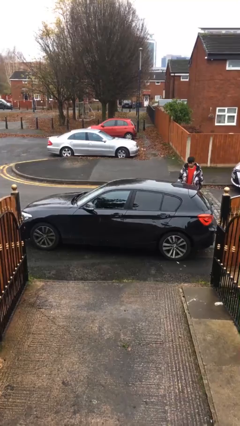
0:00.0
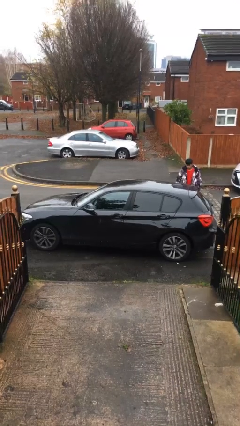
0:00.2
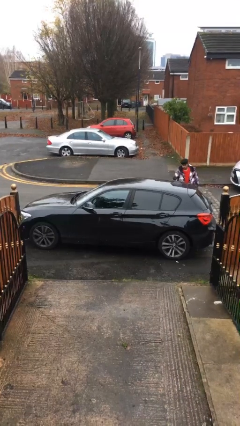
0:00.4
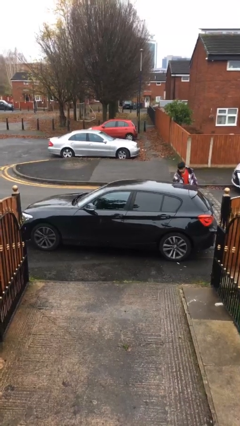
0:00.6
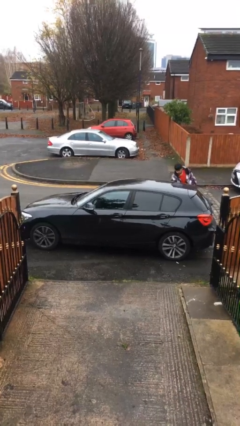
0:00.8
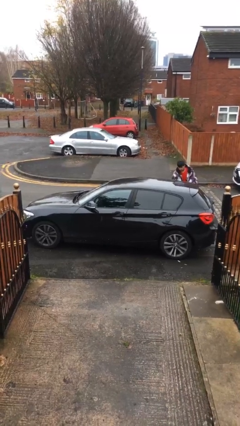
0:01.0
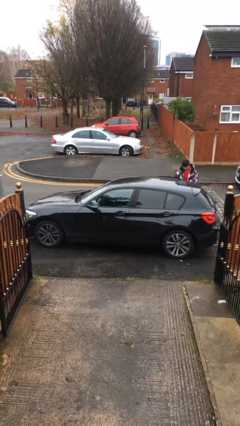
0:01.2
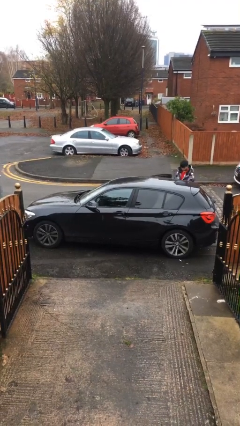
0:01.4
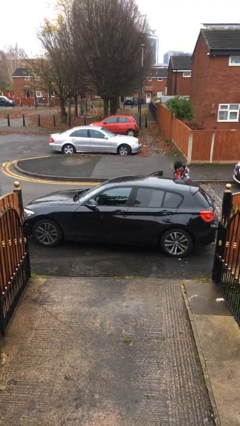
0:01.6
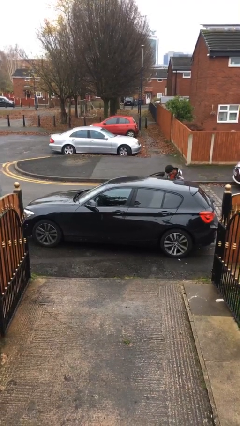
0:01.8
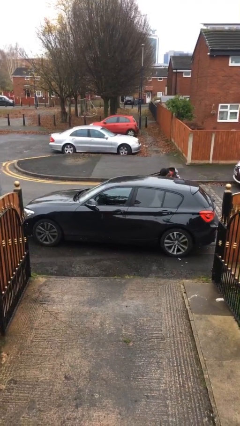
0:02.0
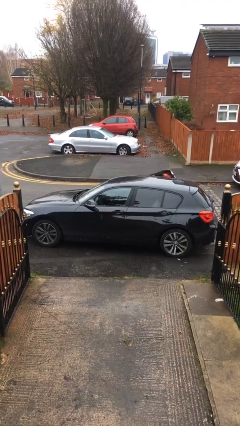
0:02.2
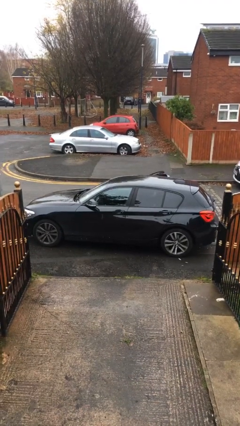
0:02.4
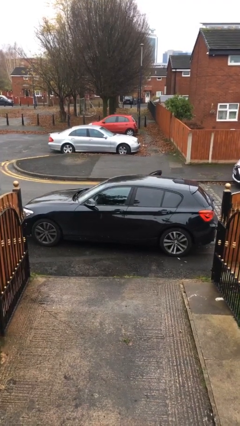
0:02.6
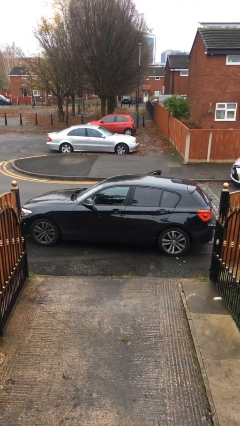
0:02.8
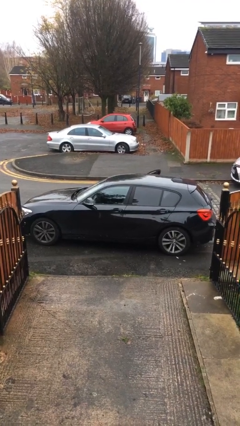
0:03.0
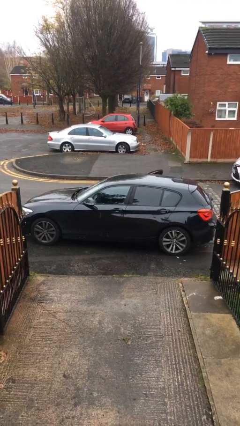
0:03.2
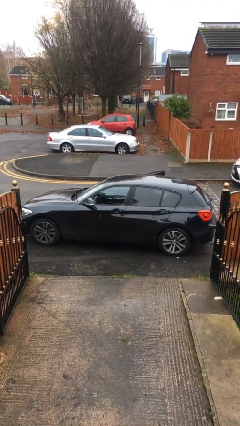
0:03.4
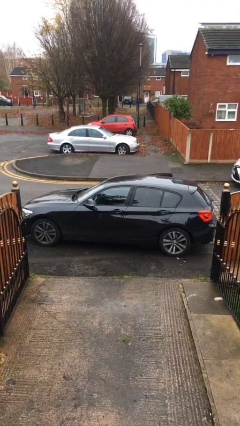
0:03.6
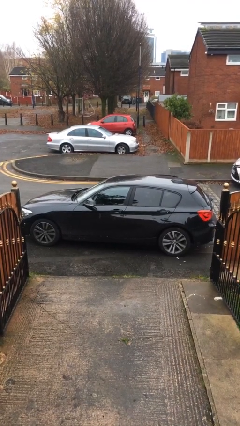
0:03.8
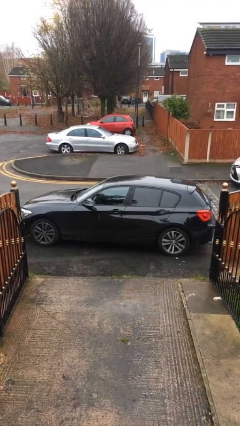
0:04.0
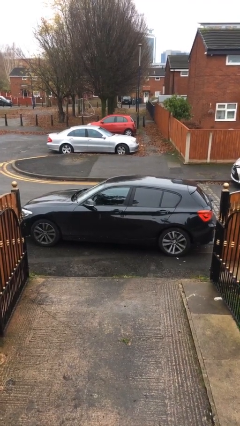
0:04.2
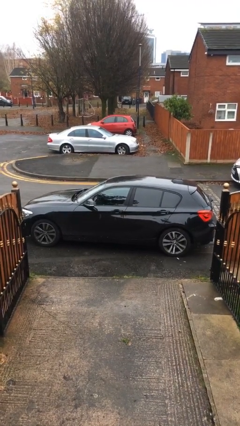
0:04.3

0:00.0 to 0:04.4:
car picks up person

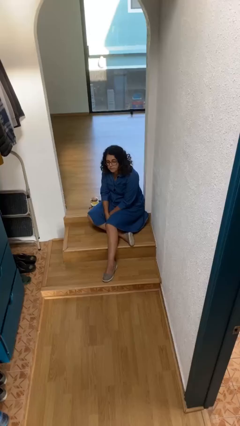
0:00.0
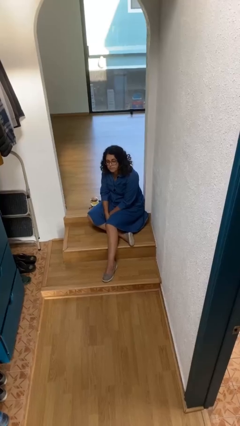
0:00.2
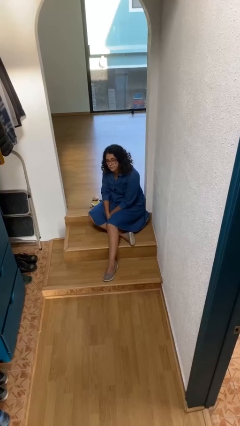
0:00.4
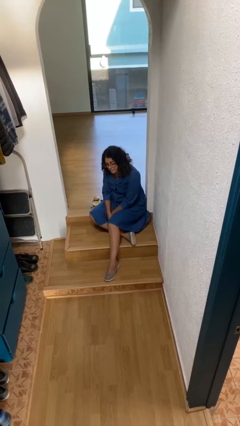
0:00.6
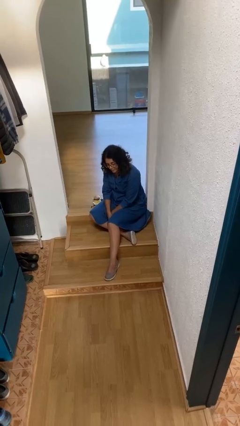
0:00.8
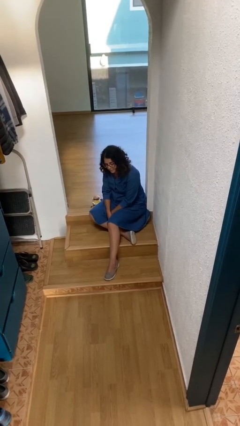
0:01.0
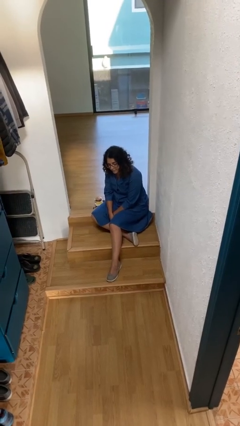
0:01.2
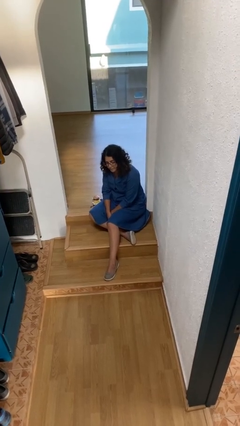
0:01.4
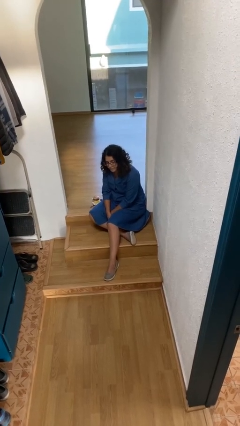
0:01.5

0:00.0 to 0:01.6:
person nods head

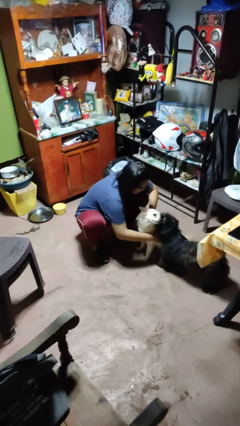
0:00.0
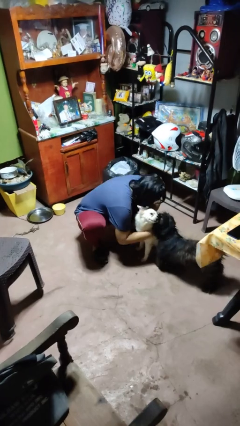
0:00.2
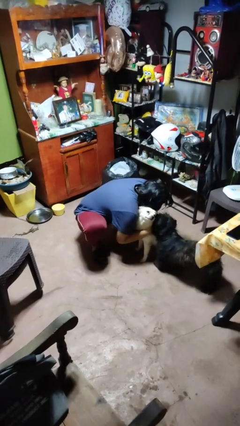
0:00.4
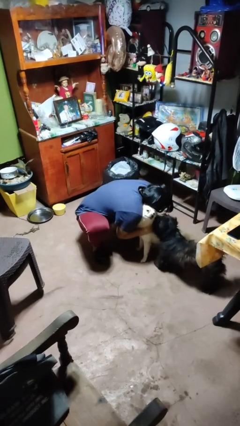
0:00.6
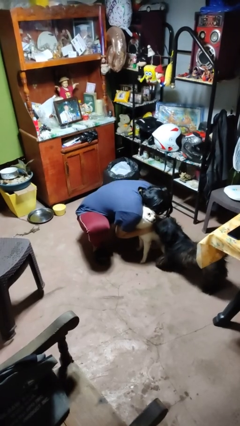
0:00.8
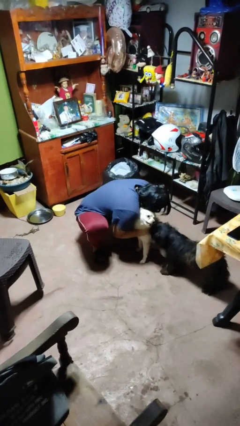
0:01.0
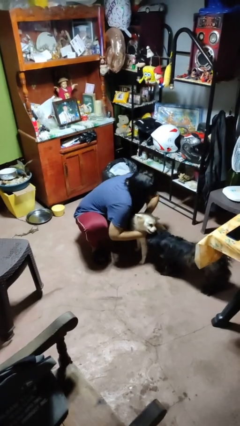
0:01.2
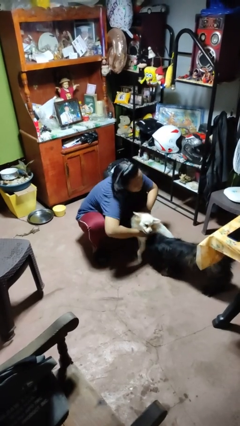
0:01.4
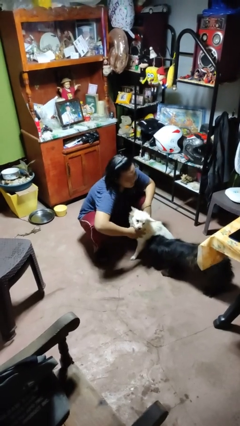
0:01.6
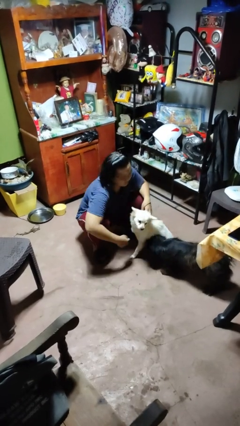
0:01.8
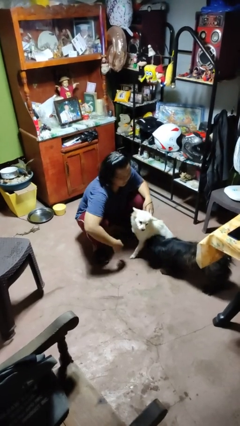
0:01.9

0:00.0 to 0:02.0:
person hugs dog

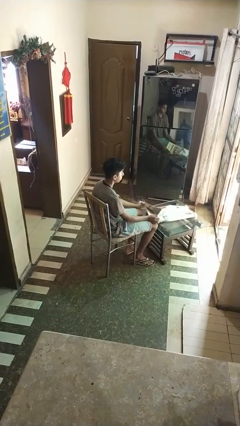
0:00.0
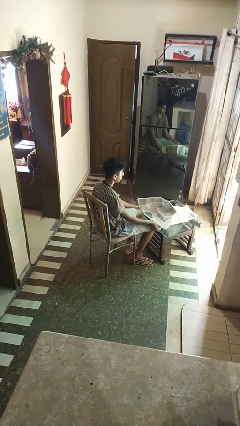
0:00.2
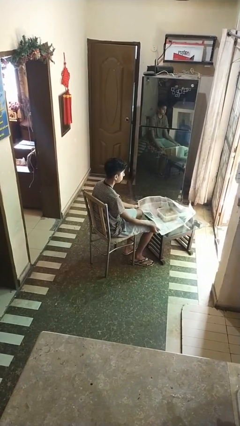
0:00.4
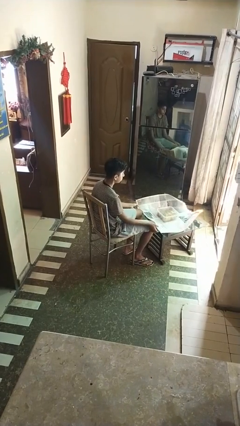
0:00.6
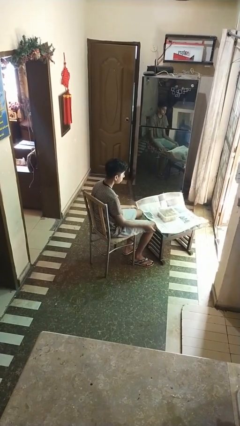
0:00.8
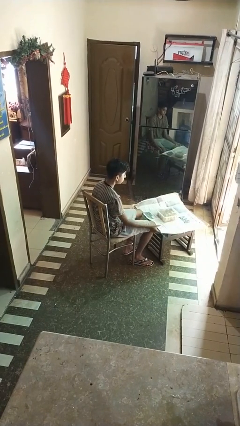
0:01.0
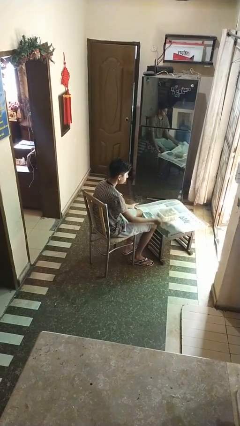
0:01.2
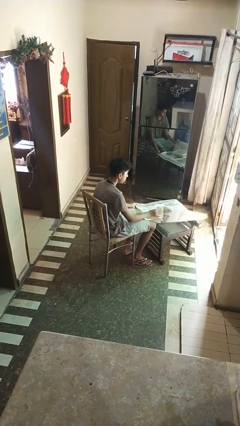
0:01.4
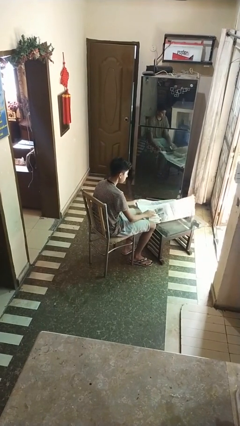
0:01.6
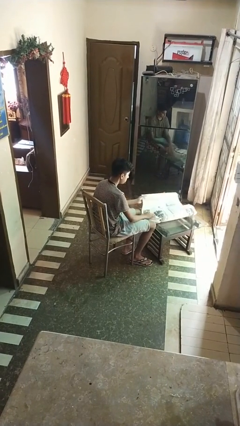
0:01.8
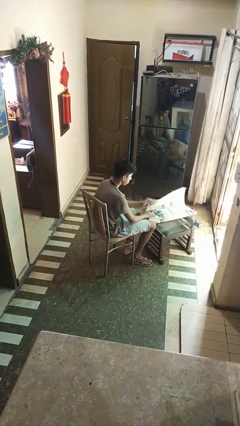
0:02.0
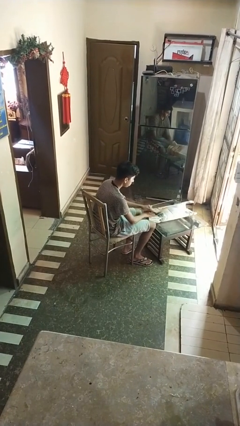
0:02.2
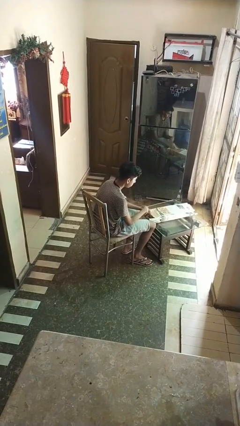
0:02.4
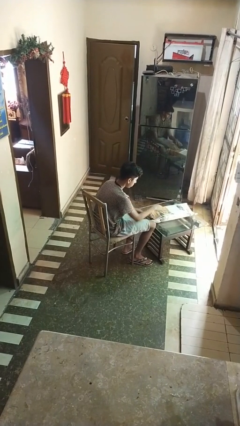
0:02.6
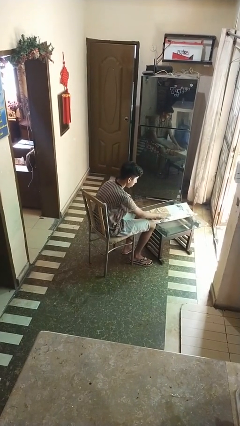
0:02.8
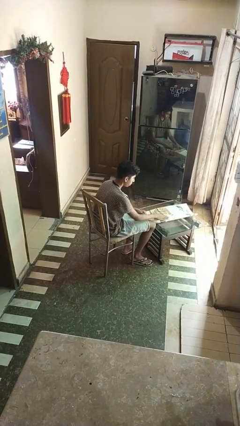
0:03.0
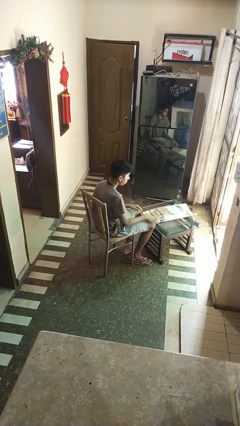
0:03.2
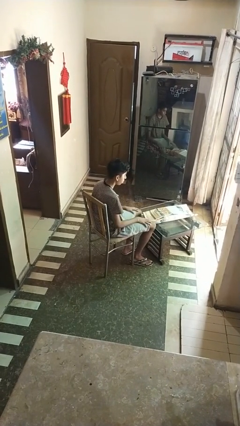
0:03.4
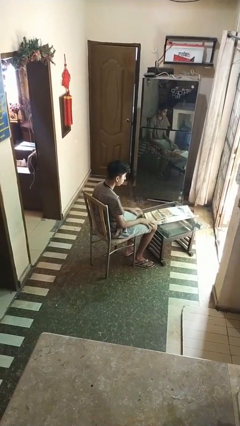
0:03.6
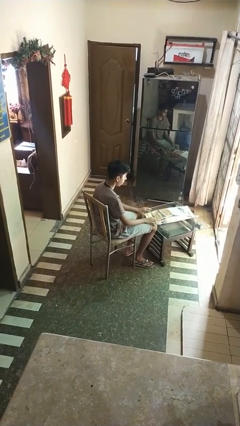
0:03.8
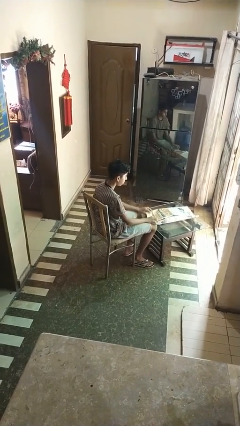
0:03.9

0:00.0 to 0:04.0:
person wraps box

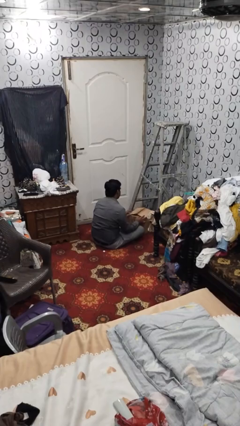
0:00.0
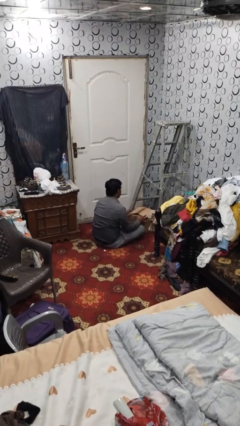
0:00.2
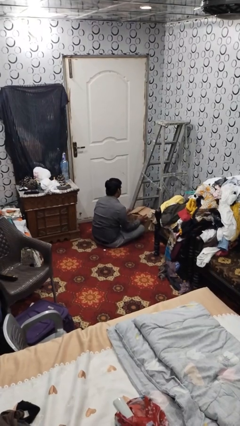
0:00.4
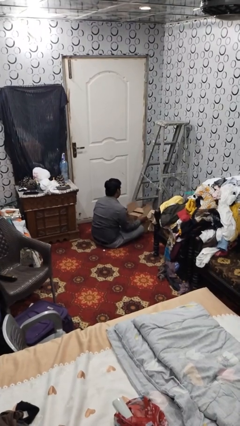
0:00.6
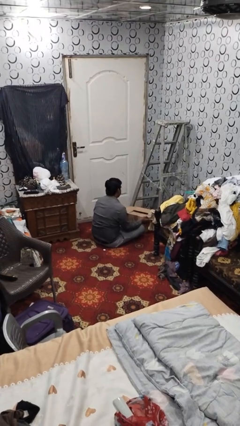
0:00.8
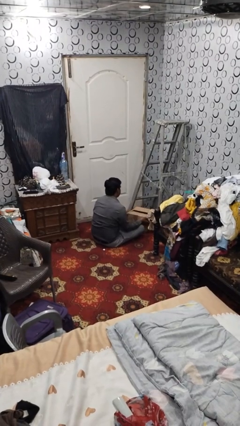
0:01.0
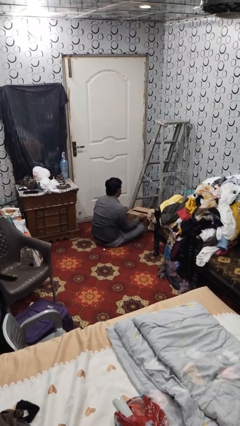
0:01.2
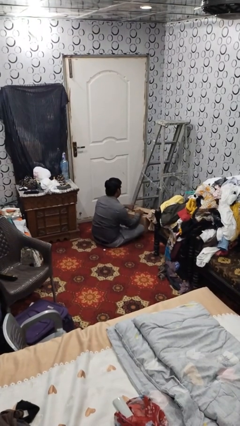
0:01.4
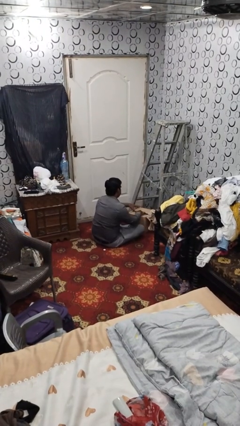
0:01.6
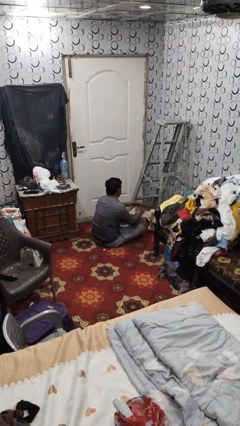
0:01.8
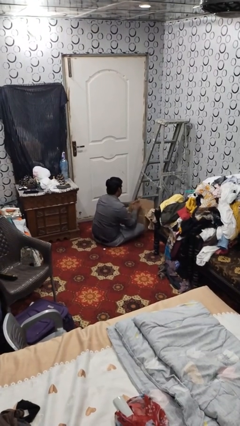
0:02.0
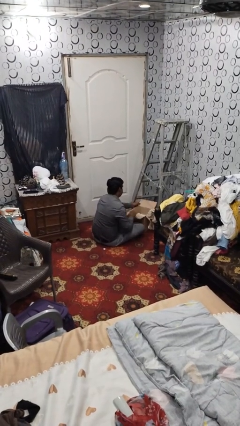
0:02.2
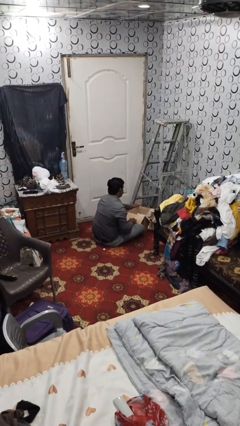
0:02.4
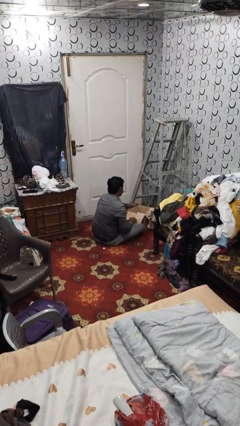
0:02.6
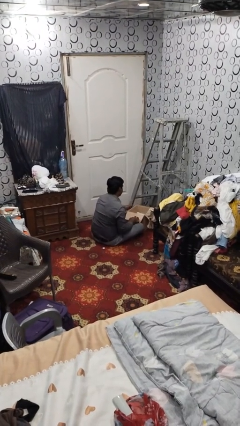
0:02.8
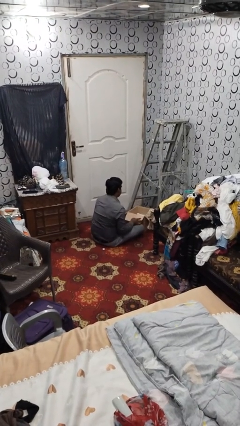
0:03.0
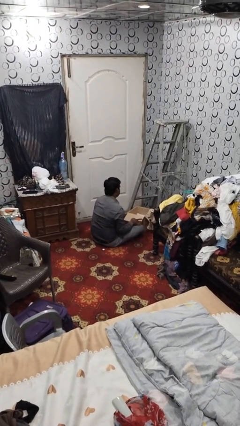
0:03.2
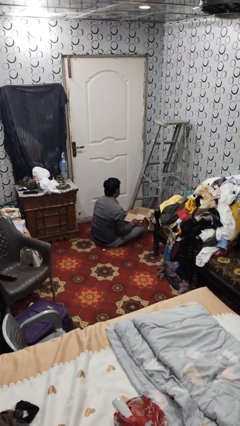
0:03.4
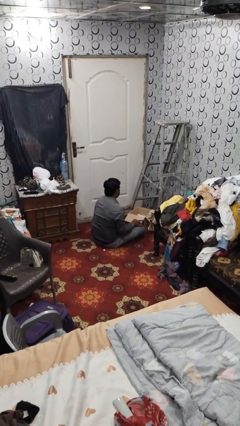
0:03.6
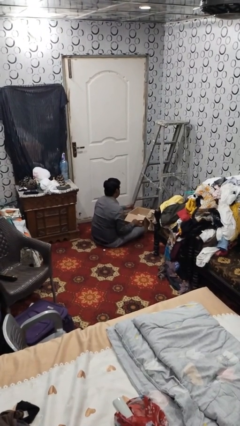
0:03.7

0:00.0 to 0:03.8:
person opens box

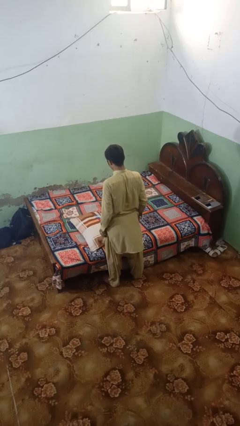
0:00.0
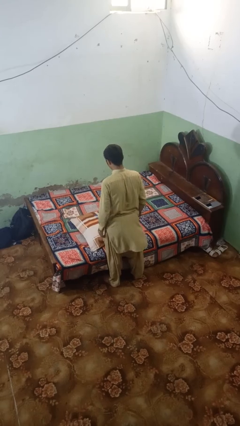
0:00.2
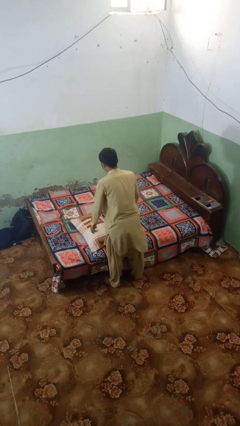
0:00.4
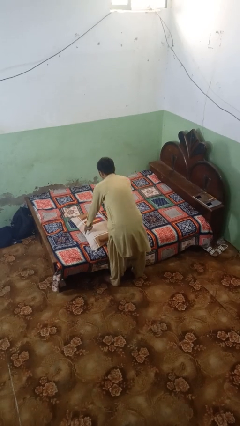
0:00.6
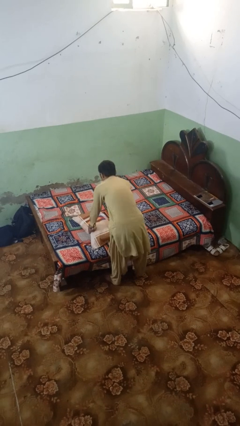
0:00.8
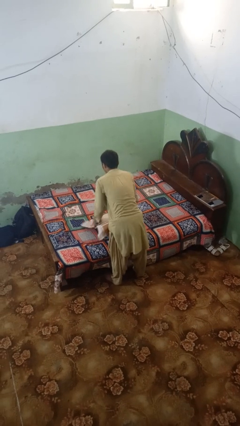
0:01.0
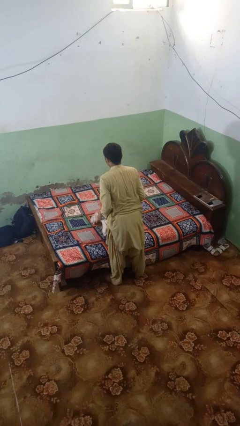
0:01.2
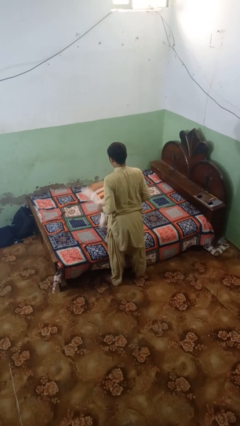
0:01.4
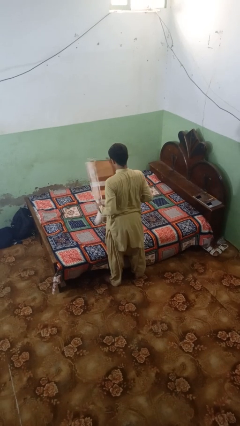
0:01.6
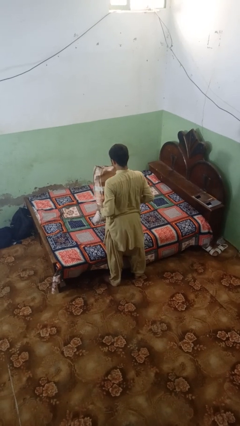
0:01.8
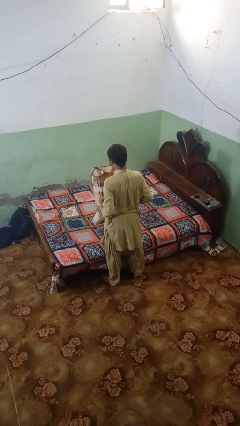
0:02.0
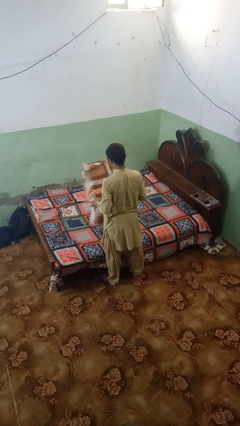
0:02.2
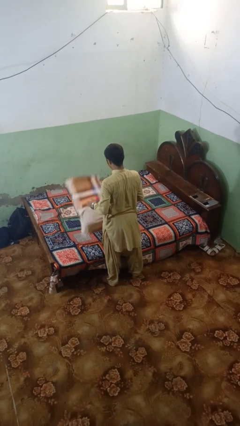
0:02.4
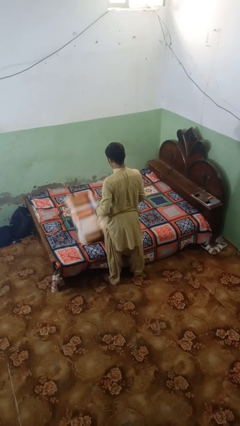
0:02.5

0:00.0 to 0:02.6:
person picks up object from bed
